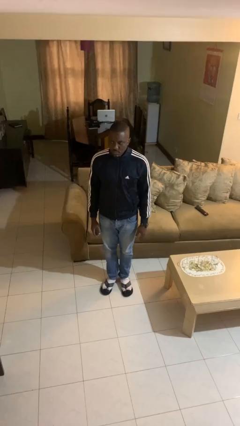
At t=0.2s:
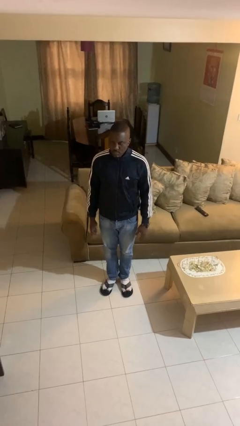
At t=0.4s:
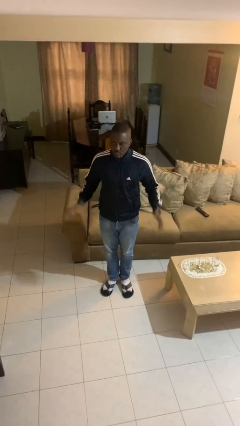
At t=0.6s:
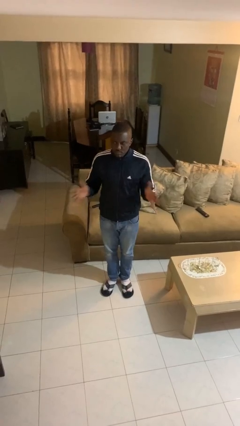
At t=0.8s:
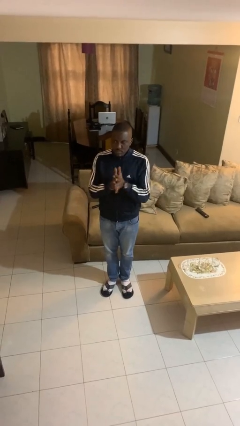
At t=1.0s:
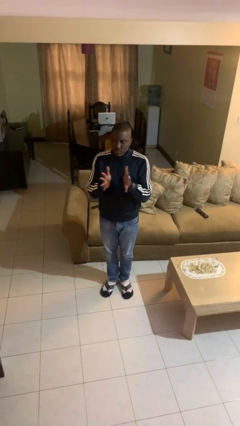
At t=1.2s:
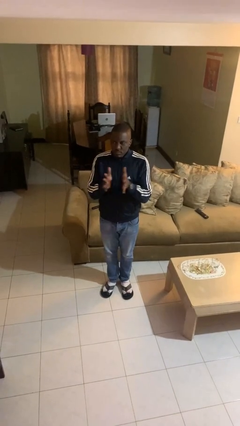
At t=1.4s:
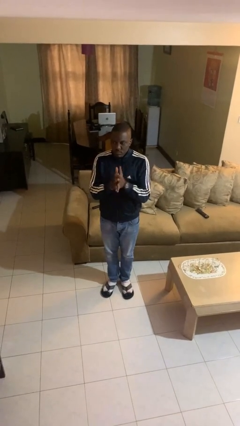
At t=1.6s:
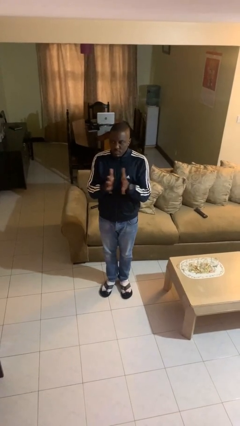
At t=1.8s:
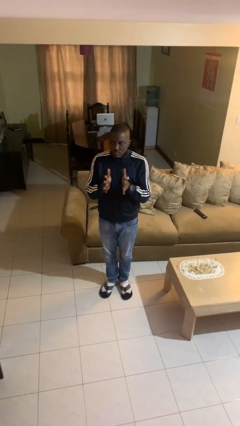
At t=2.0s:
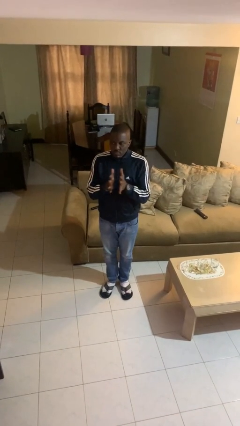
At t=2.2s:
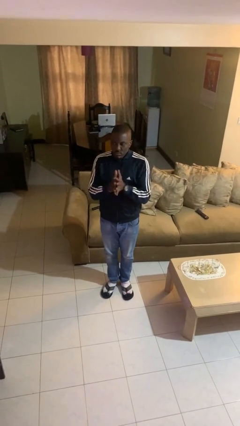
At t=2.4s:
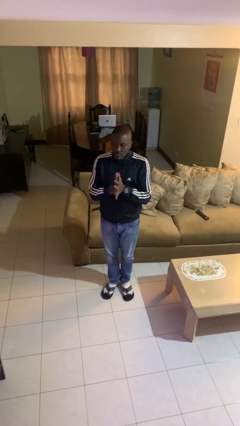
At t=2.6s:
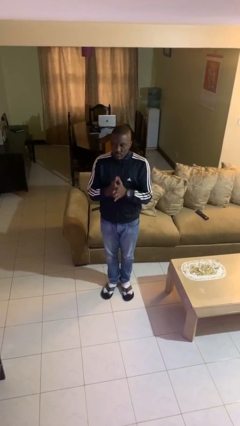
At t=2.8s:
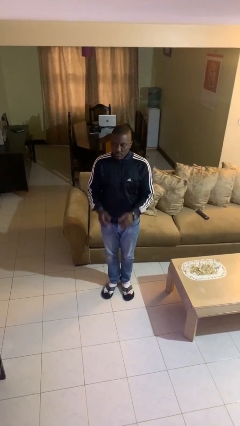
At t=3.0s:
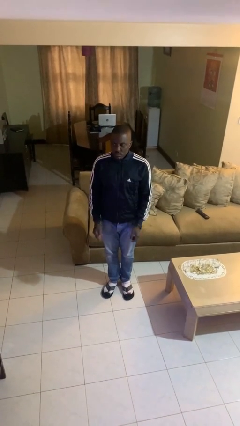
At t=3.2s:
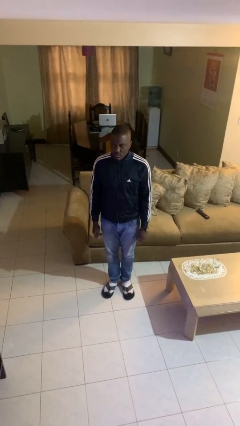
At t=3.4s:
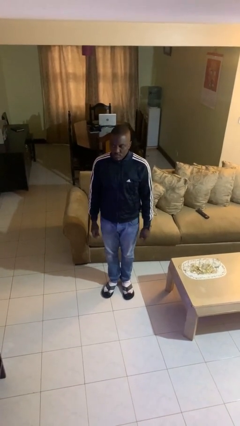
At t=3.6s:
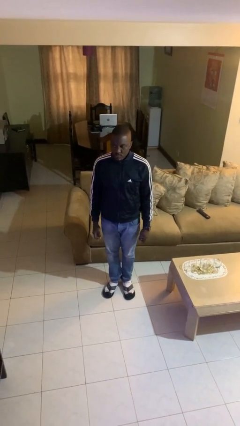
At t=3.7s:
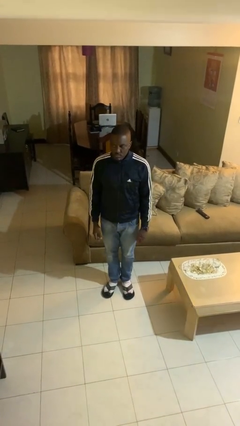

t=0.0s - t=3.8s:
person claps hands

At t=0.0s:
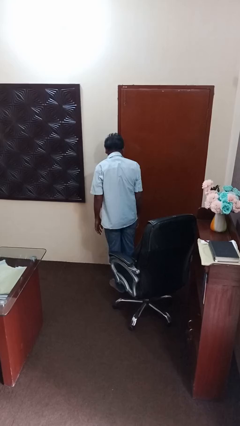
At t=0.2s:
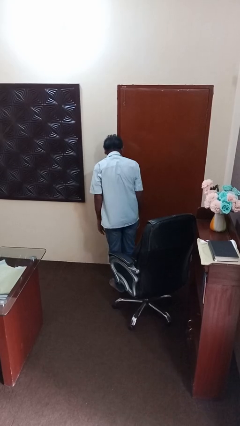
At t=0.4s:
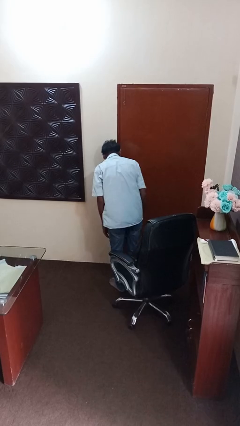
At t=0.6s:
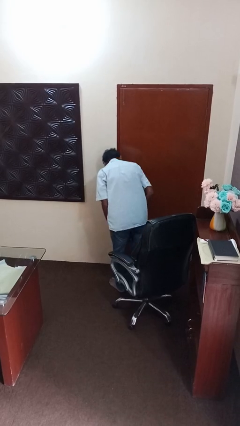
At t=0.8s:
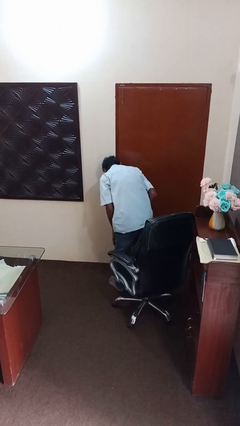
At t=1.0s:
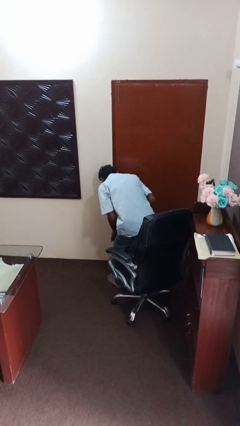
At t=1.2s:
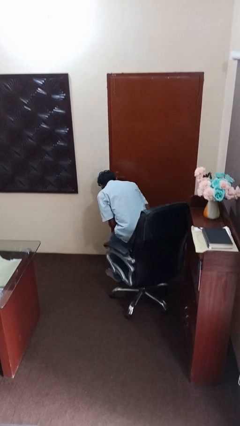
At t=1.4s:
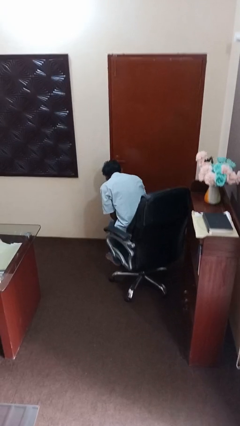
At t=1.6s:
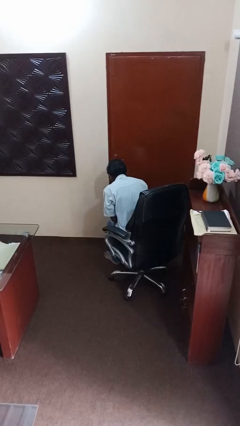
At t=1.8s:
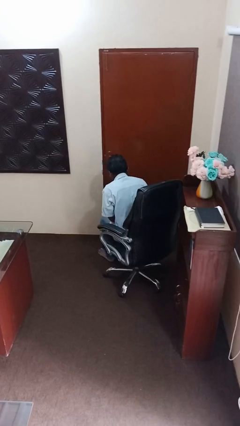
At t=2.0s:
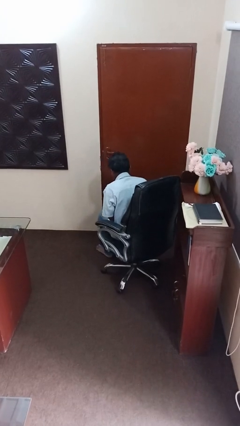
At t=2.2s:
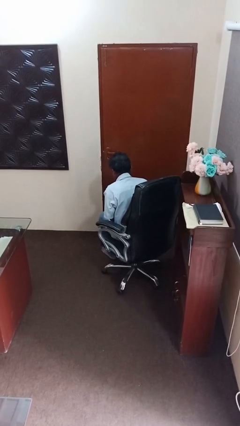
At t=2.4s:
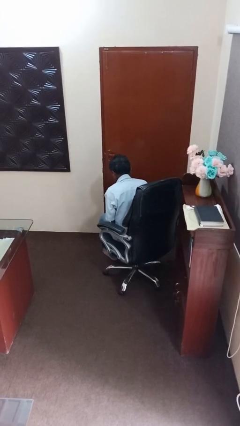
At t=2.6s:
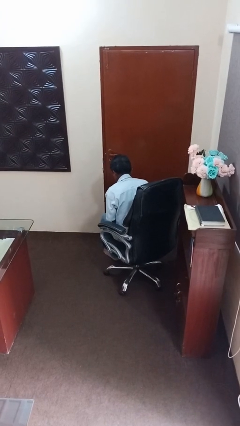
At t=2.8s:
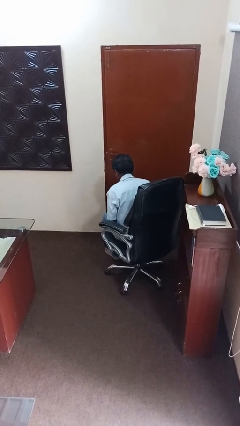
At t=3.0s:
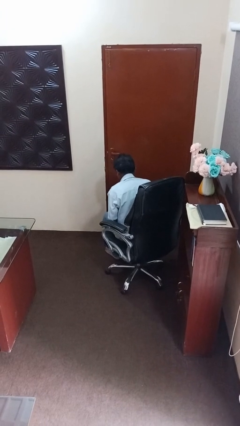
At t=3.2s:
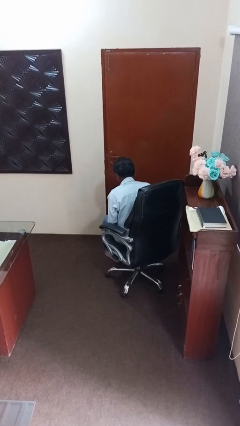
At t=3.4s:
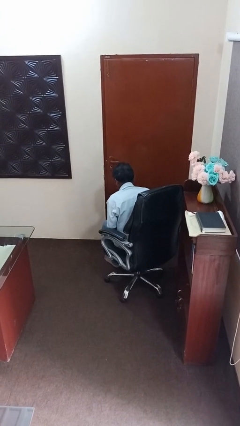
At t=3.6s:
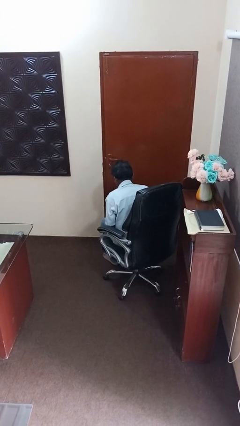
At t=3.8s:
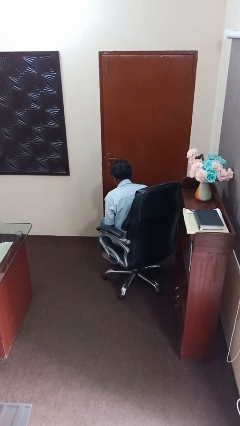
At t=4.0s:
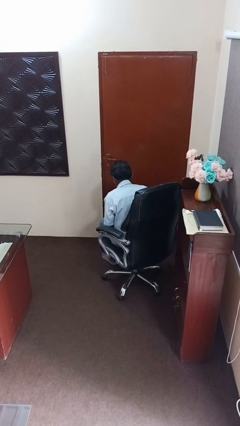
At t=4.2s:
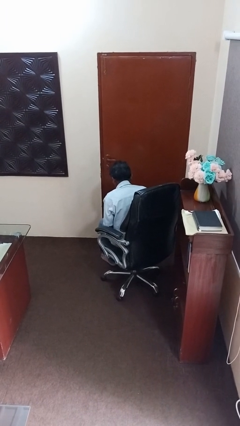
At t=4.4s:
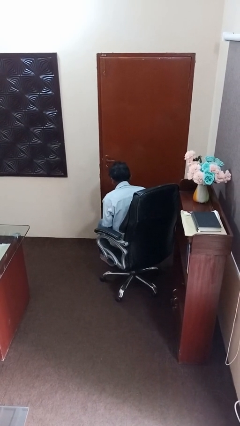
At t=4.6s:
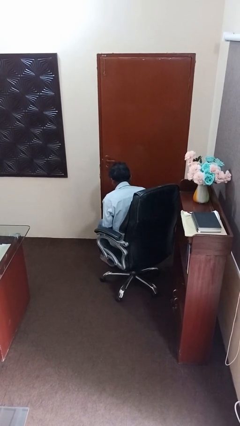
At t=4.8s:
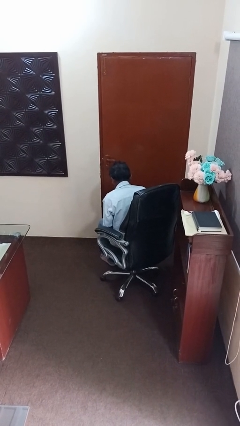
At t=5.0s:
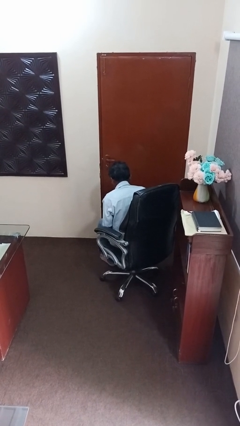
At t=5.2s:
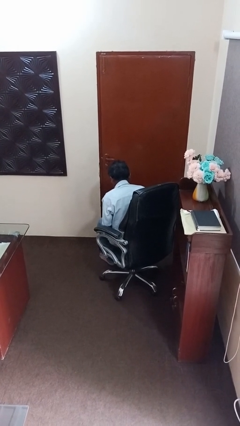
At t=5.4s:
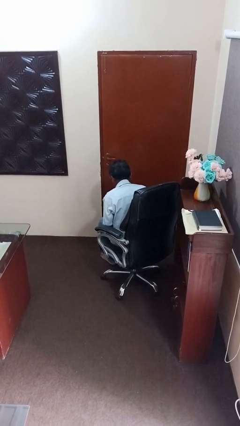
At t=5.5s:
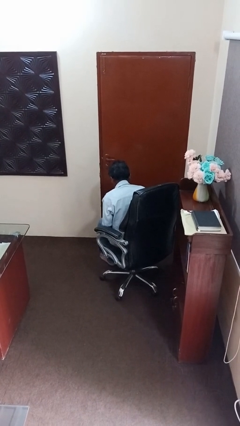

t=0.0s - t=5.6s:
person sits down

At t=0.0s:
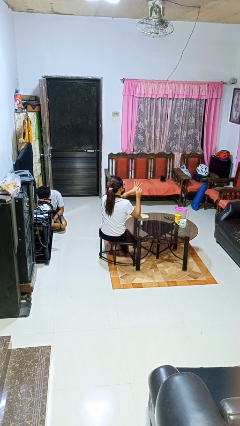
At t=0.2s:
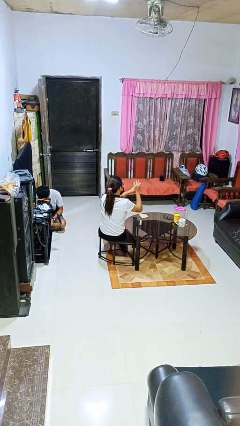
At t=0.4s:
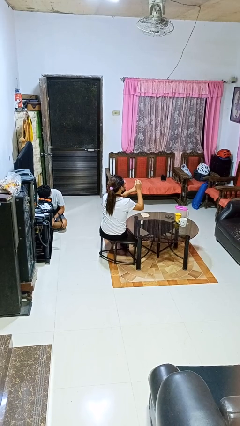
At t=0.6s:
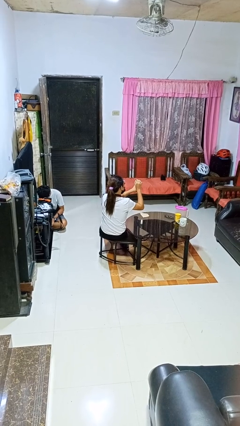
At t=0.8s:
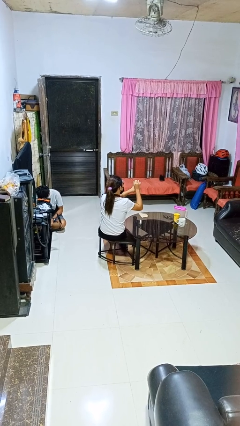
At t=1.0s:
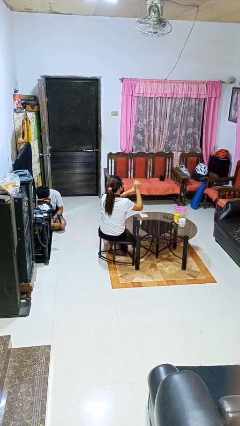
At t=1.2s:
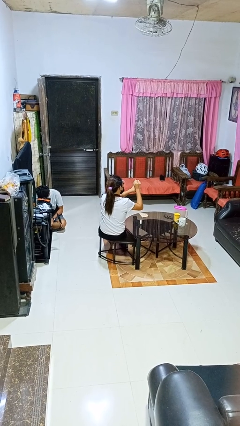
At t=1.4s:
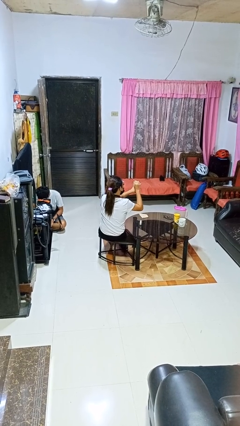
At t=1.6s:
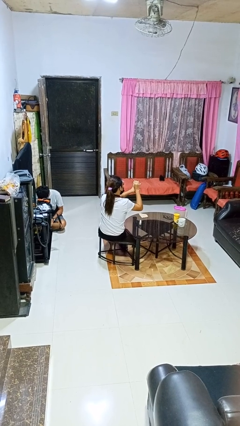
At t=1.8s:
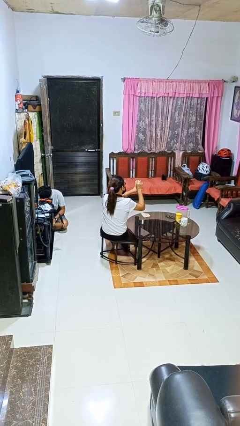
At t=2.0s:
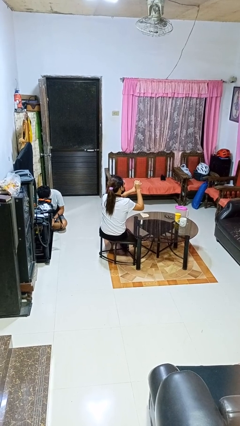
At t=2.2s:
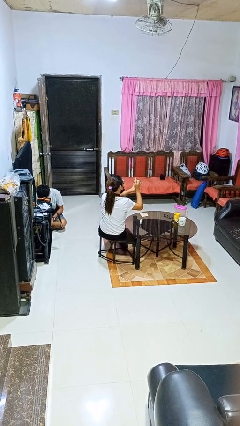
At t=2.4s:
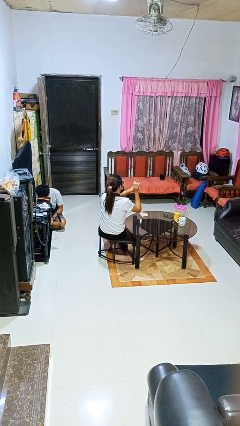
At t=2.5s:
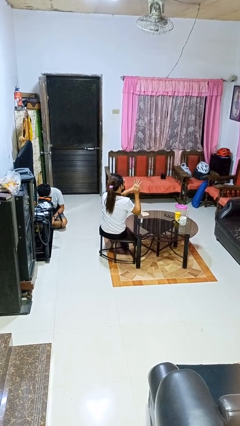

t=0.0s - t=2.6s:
person paints fingernails

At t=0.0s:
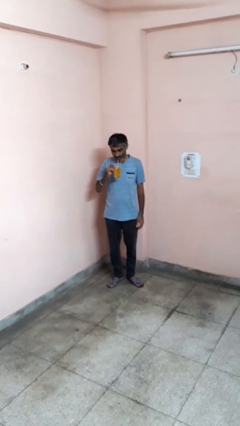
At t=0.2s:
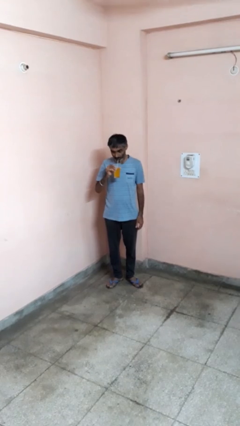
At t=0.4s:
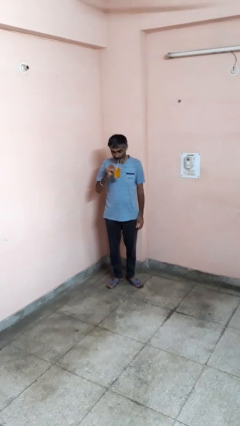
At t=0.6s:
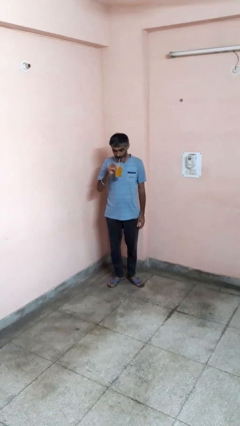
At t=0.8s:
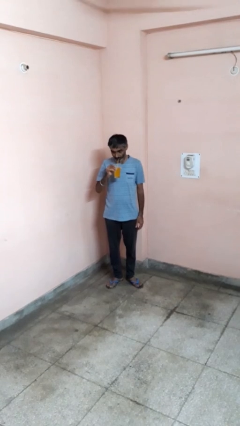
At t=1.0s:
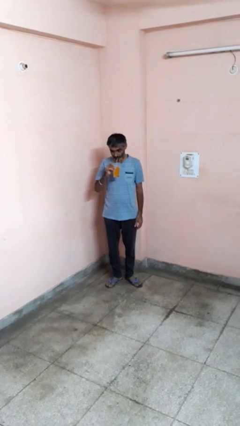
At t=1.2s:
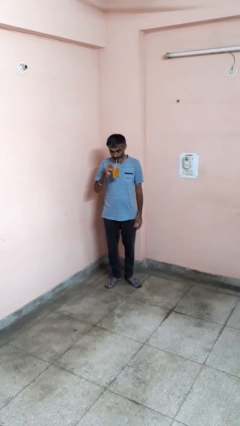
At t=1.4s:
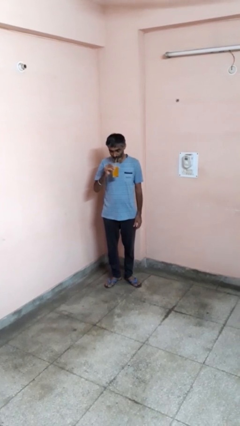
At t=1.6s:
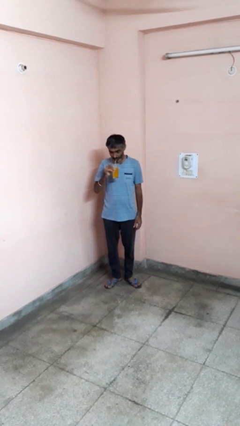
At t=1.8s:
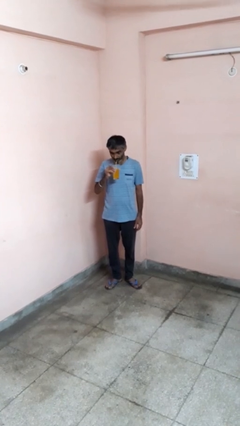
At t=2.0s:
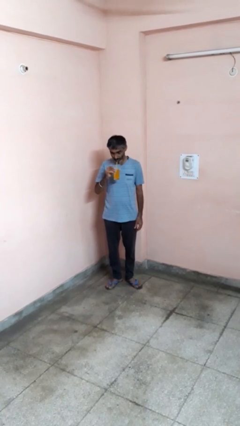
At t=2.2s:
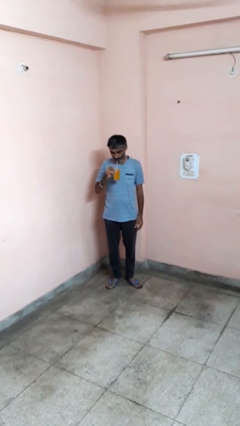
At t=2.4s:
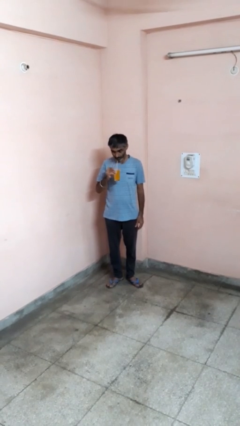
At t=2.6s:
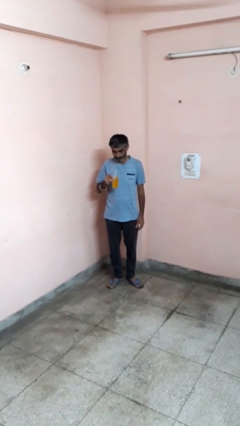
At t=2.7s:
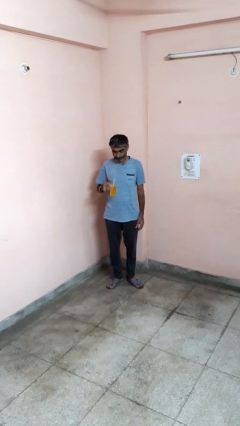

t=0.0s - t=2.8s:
person drinks from straw

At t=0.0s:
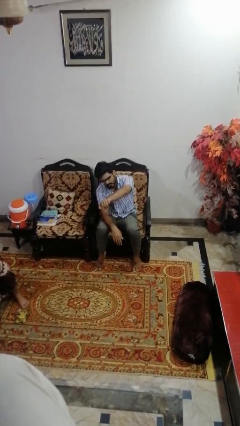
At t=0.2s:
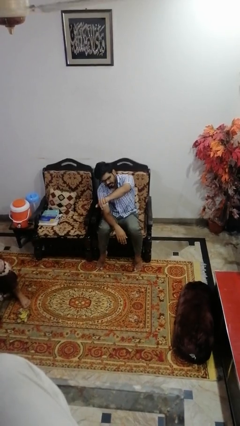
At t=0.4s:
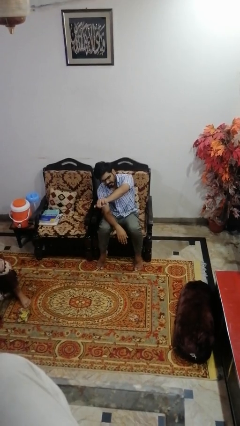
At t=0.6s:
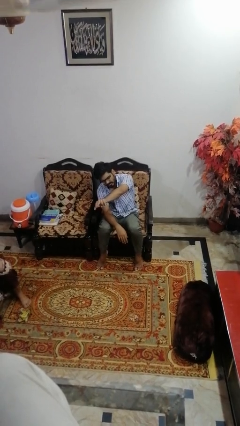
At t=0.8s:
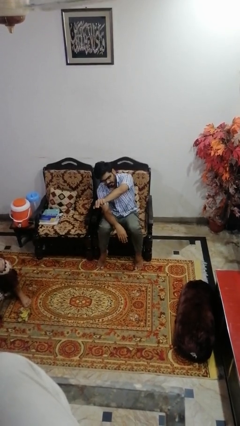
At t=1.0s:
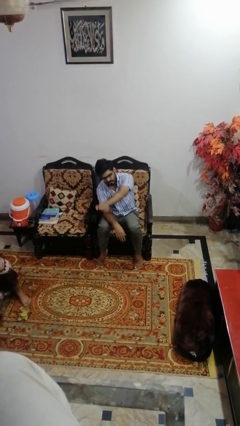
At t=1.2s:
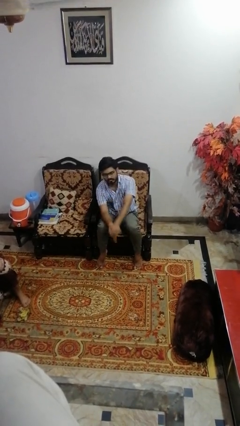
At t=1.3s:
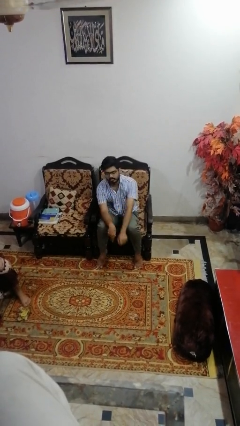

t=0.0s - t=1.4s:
person gestures come here

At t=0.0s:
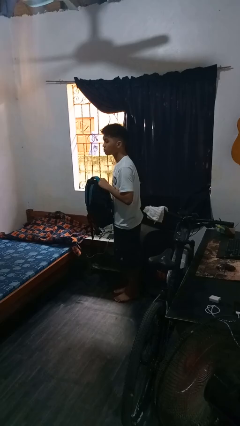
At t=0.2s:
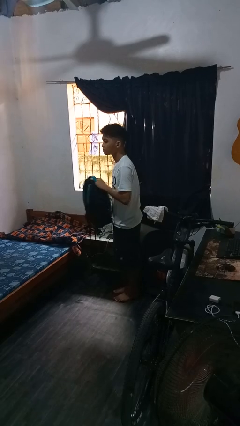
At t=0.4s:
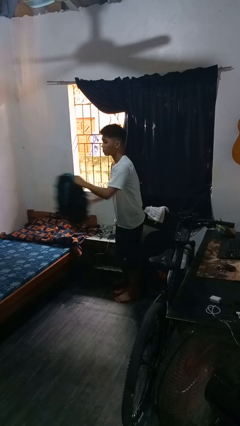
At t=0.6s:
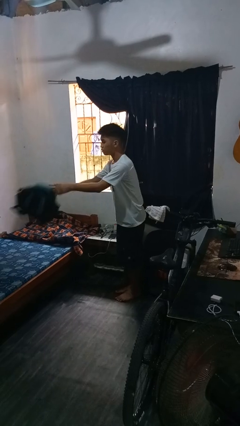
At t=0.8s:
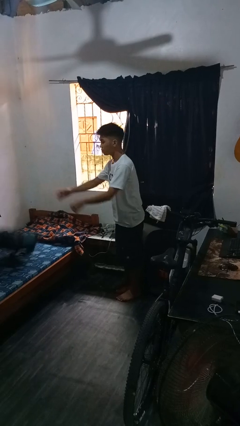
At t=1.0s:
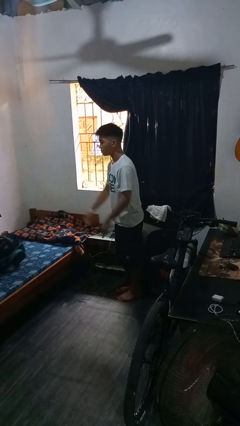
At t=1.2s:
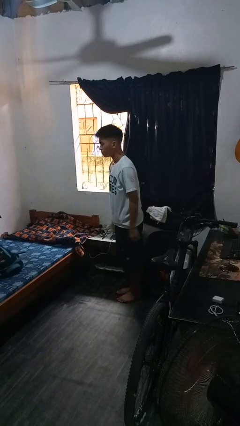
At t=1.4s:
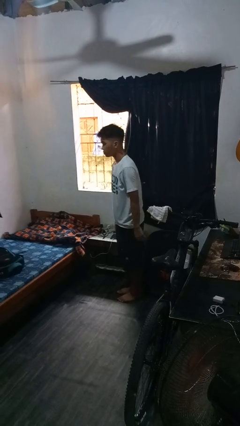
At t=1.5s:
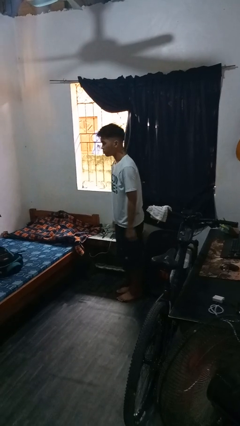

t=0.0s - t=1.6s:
person throws object on bed
